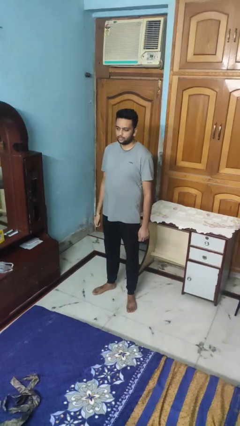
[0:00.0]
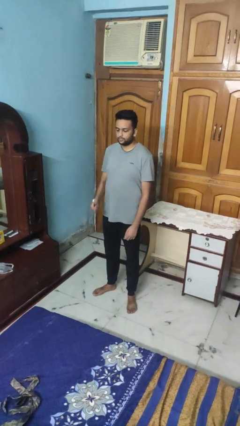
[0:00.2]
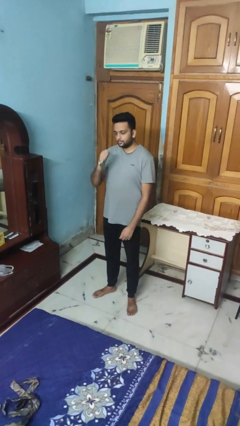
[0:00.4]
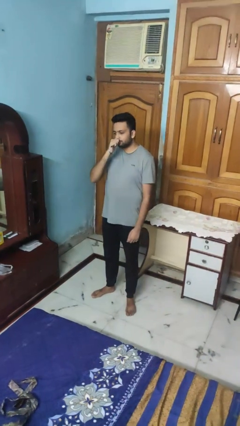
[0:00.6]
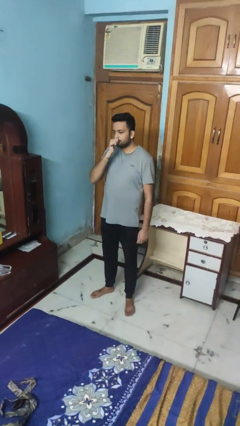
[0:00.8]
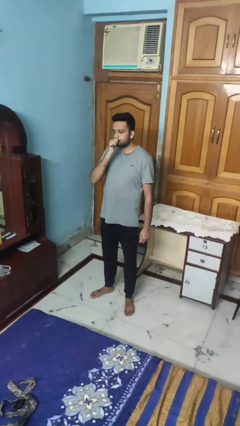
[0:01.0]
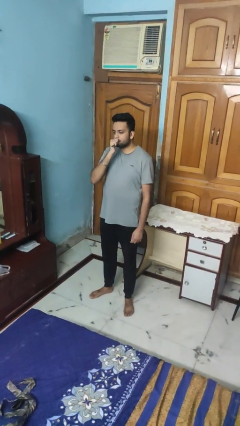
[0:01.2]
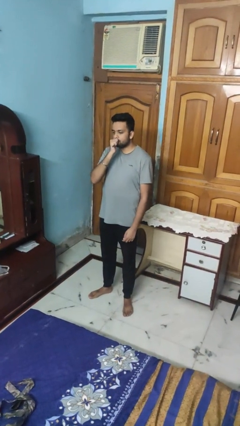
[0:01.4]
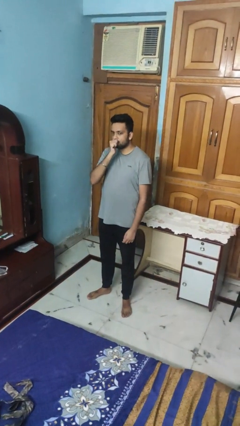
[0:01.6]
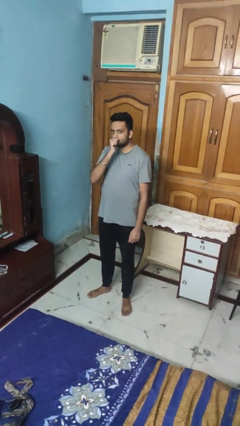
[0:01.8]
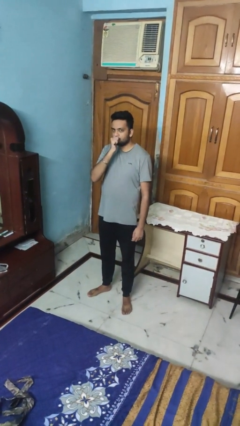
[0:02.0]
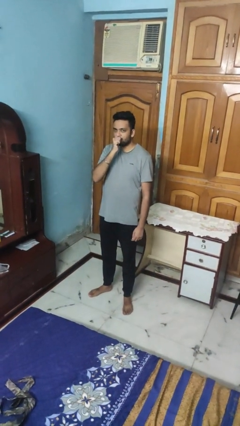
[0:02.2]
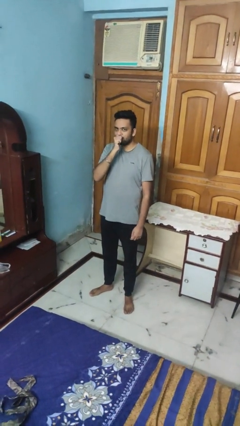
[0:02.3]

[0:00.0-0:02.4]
person vapes

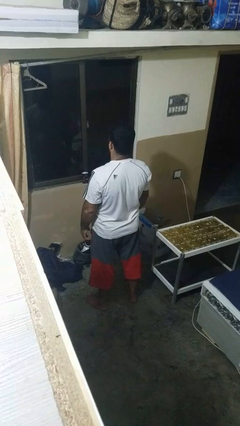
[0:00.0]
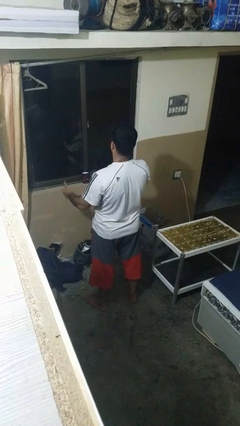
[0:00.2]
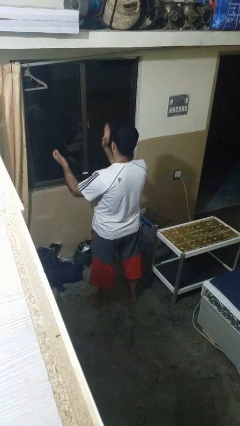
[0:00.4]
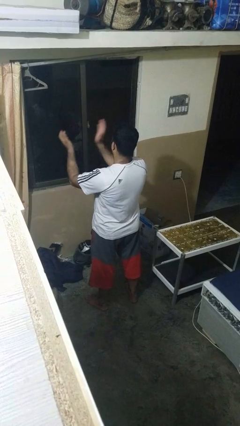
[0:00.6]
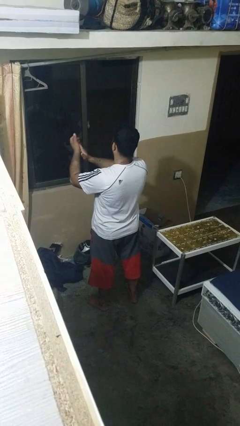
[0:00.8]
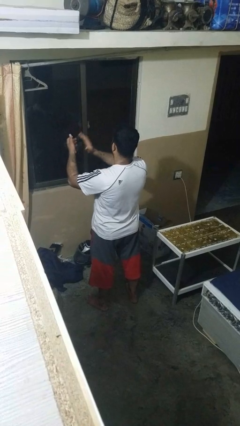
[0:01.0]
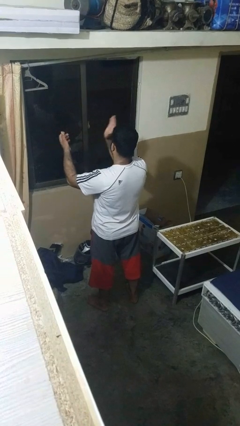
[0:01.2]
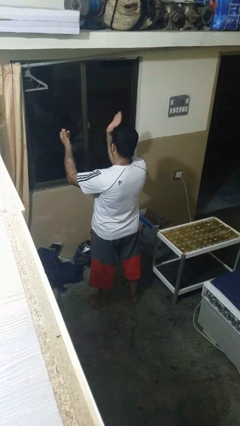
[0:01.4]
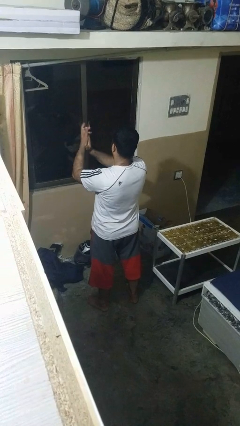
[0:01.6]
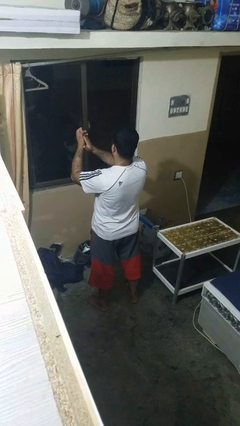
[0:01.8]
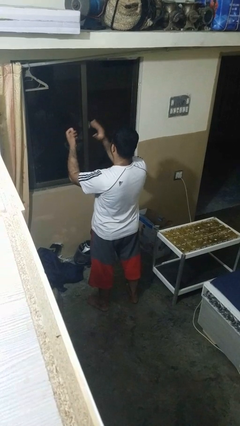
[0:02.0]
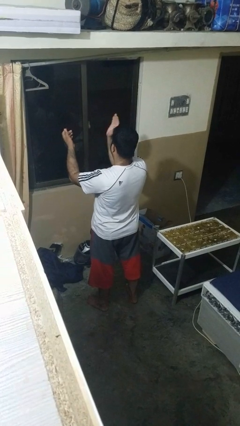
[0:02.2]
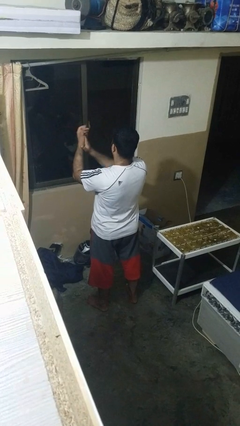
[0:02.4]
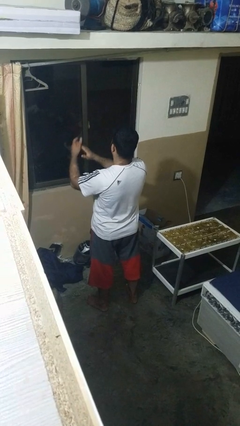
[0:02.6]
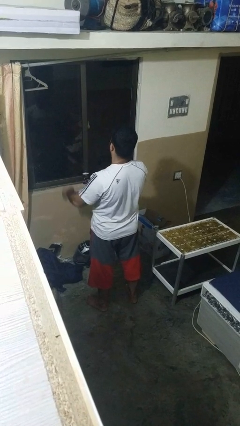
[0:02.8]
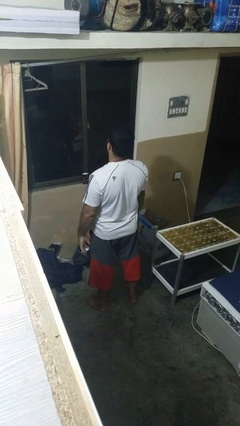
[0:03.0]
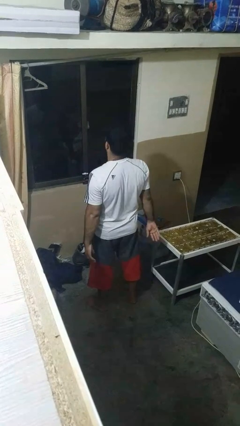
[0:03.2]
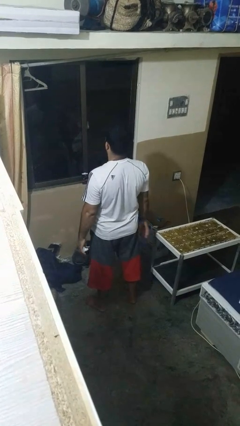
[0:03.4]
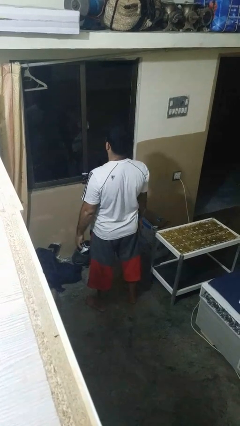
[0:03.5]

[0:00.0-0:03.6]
person claps hands

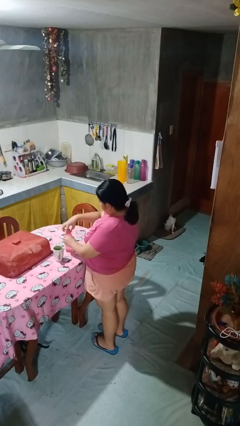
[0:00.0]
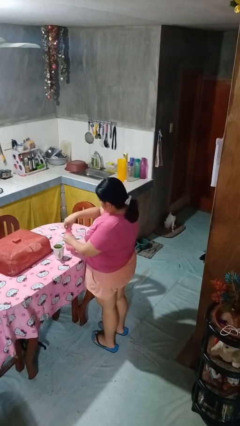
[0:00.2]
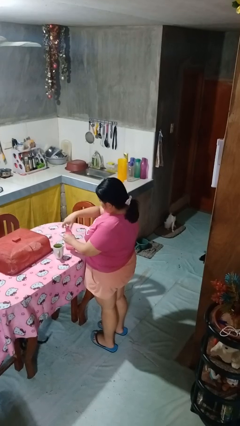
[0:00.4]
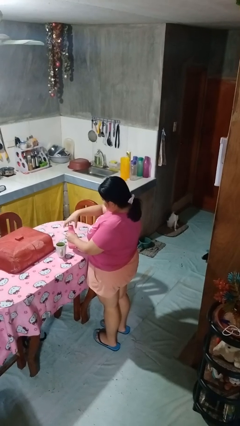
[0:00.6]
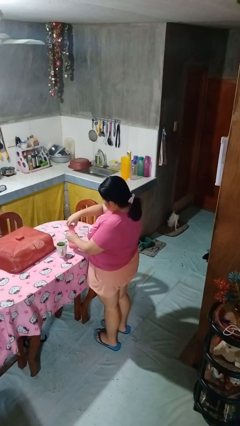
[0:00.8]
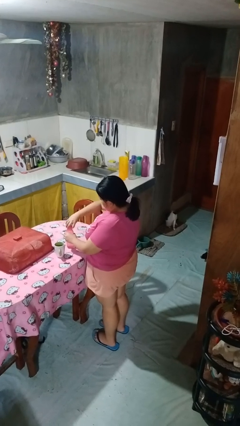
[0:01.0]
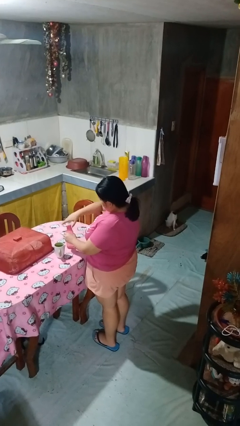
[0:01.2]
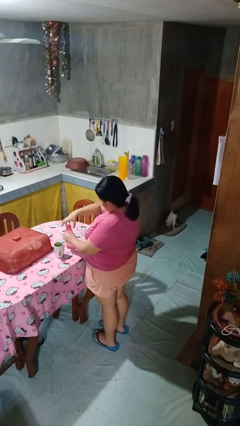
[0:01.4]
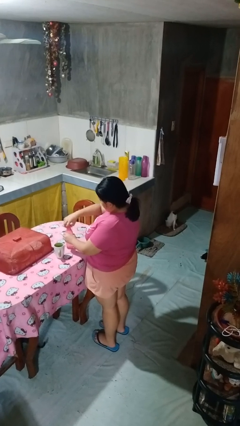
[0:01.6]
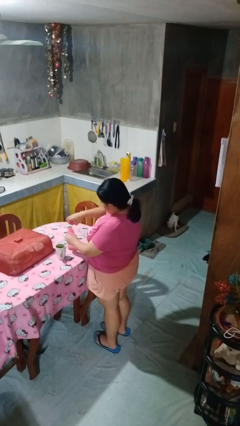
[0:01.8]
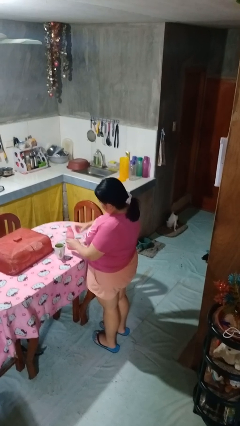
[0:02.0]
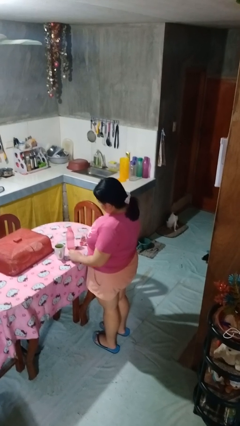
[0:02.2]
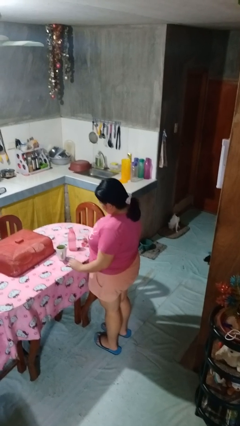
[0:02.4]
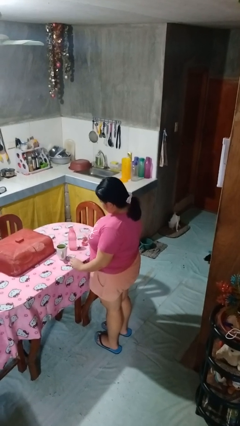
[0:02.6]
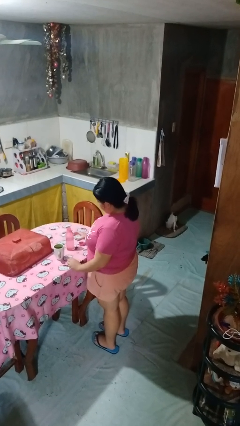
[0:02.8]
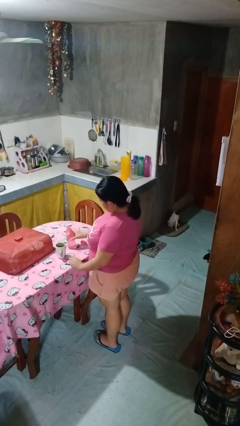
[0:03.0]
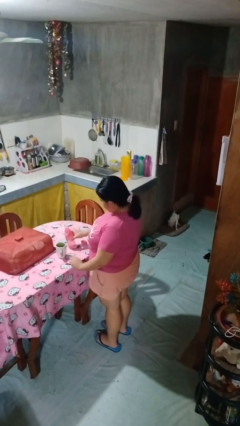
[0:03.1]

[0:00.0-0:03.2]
person unscrews lid from bottle

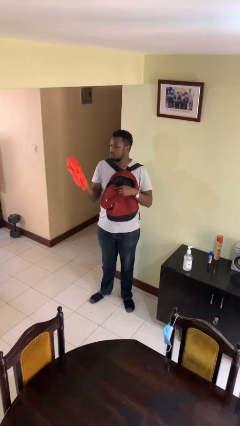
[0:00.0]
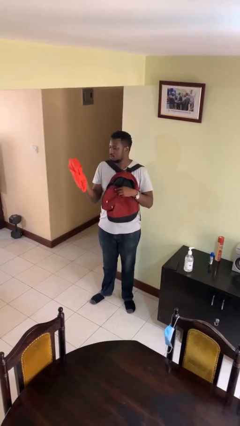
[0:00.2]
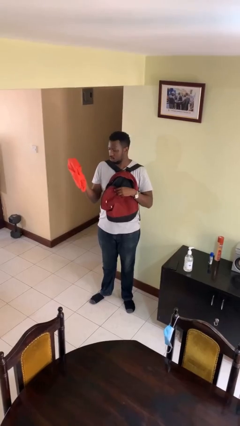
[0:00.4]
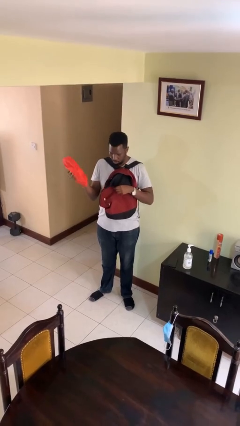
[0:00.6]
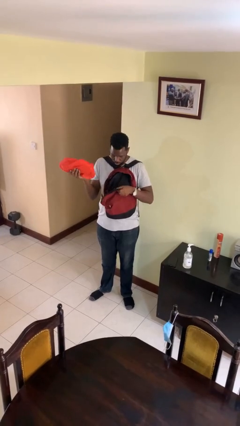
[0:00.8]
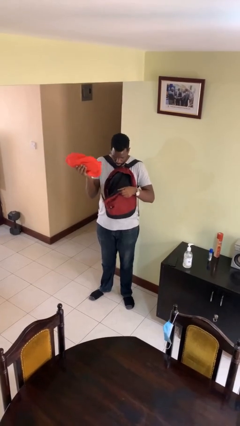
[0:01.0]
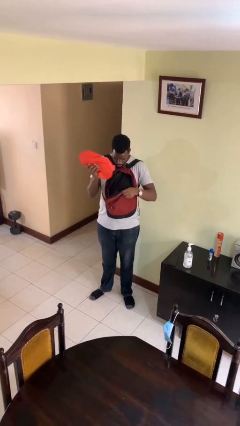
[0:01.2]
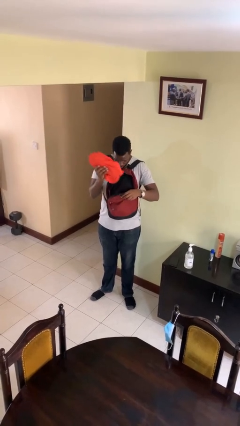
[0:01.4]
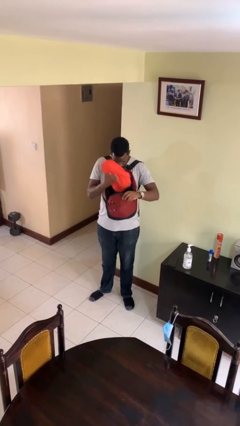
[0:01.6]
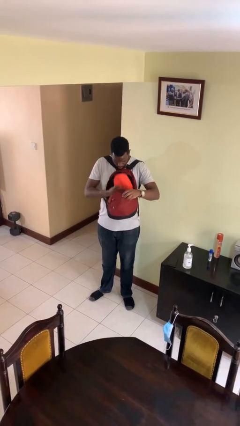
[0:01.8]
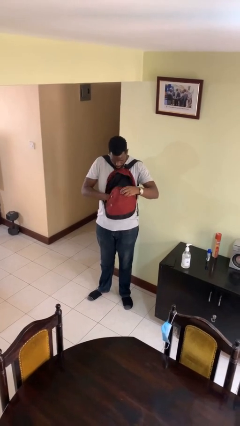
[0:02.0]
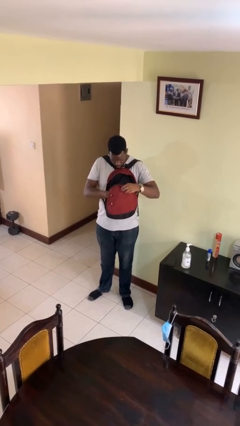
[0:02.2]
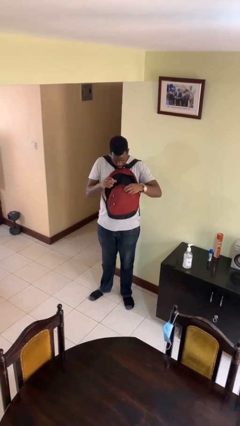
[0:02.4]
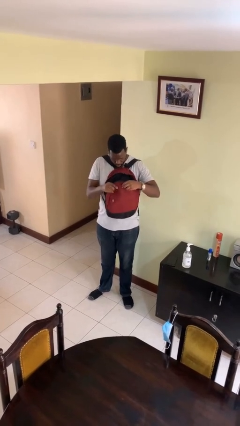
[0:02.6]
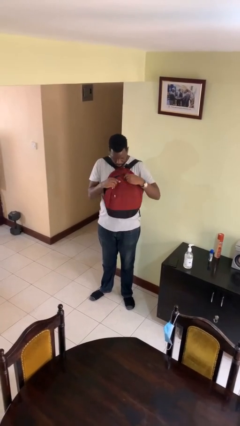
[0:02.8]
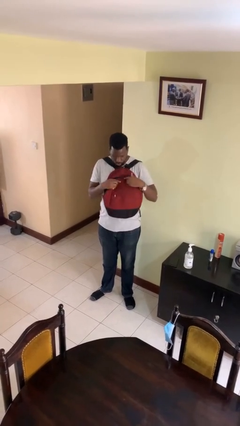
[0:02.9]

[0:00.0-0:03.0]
person puts object into backpack

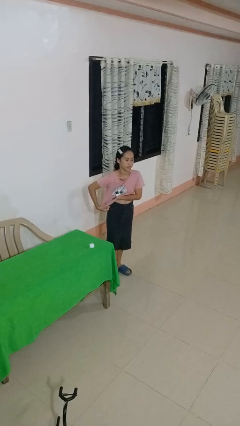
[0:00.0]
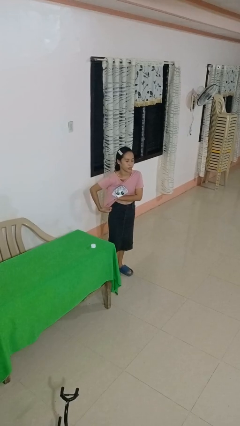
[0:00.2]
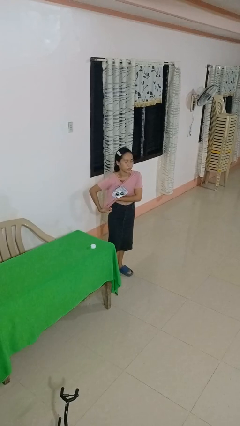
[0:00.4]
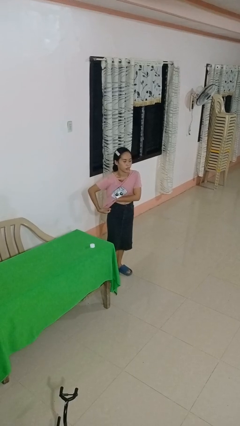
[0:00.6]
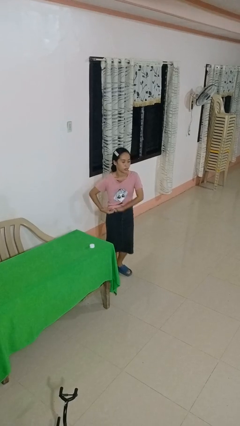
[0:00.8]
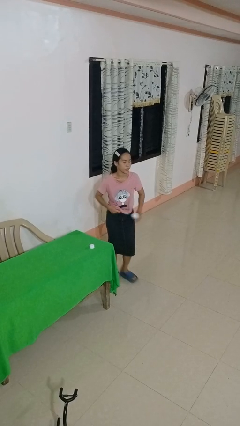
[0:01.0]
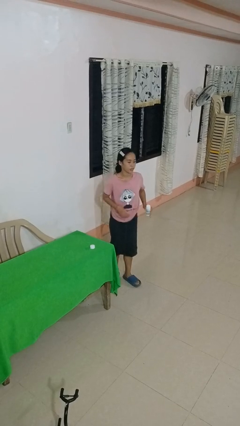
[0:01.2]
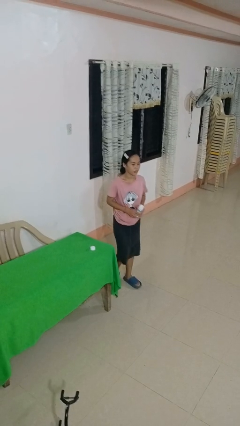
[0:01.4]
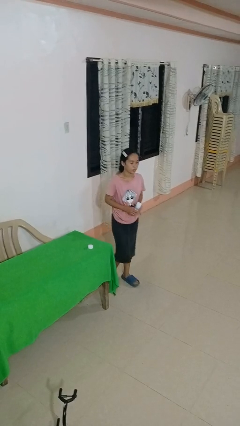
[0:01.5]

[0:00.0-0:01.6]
person applies deodorant

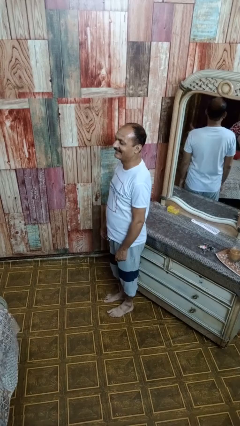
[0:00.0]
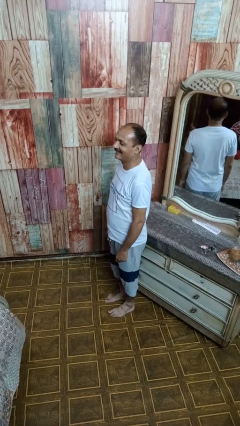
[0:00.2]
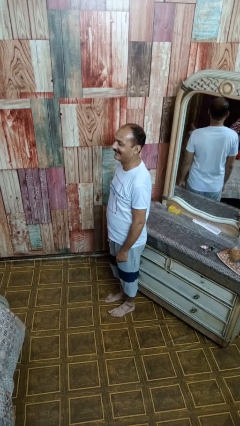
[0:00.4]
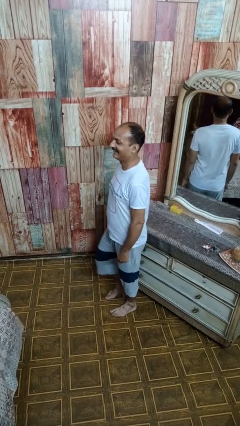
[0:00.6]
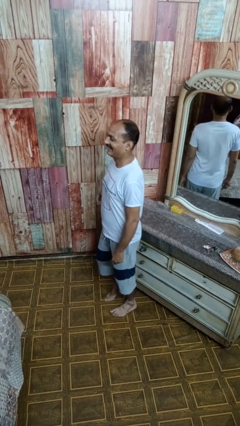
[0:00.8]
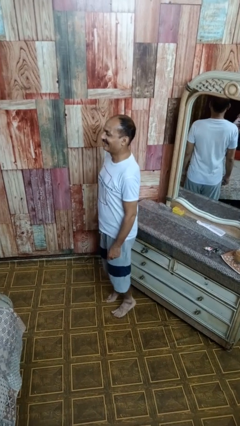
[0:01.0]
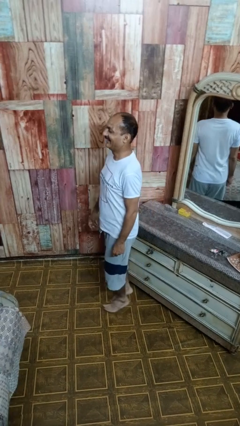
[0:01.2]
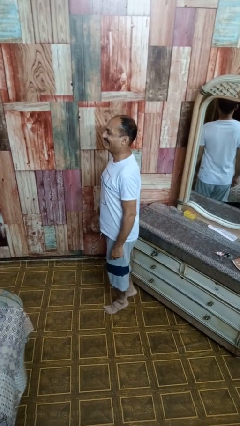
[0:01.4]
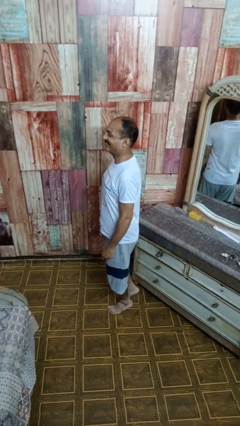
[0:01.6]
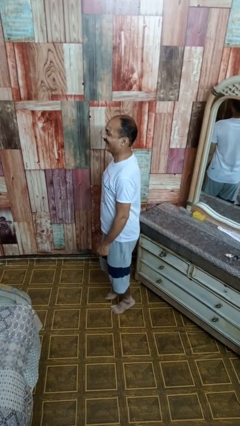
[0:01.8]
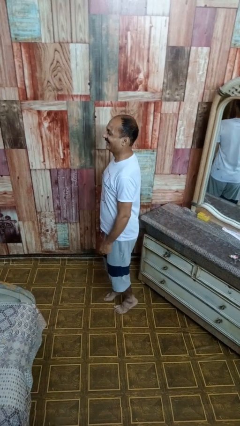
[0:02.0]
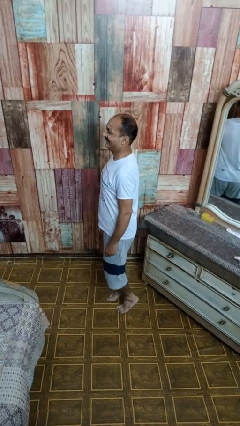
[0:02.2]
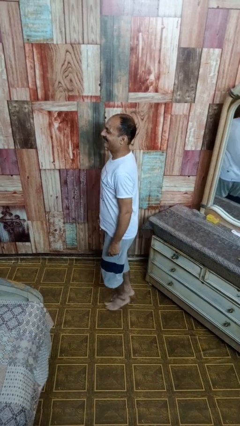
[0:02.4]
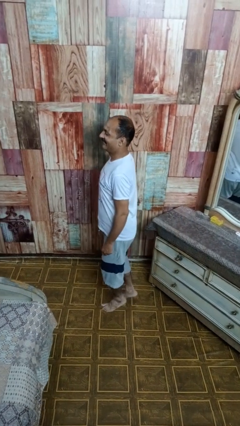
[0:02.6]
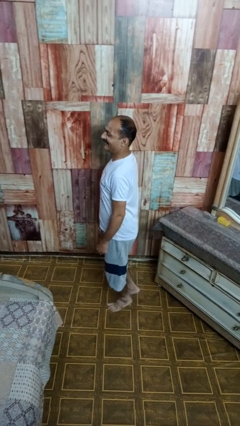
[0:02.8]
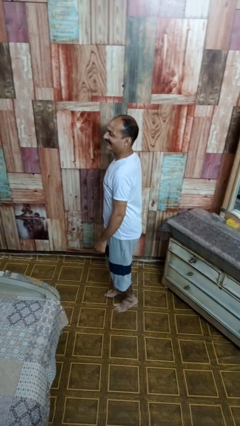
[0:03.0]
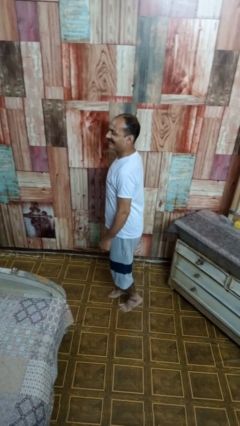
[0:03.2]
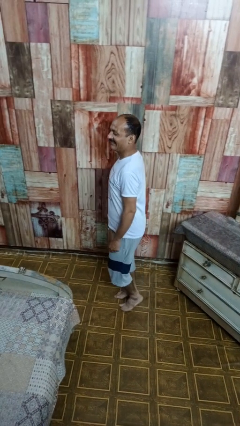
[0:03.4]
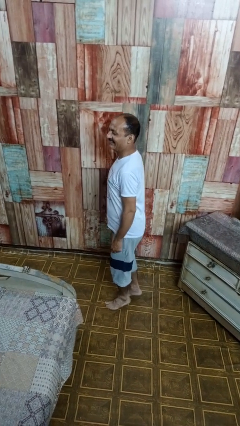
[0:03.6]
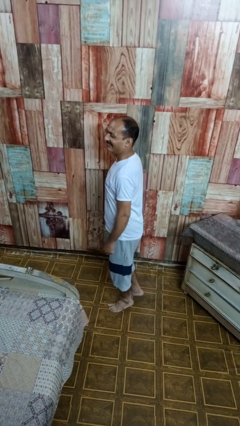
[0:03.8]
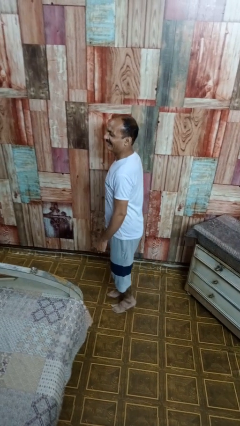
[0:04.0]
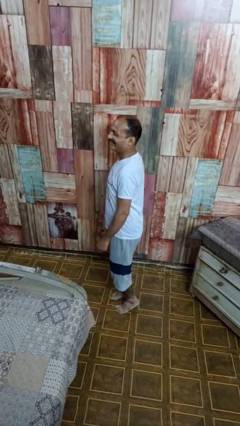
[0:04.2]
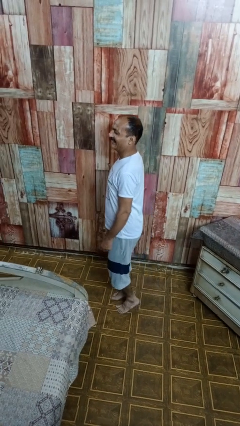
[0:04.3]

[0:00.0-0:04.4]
person walks tiptoe
